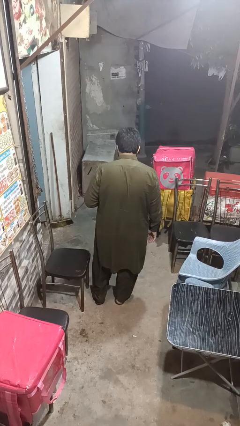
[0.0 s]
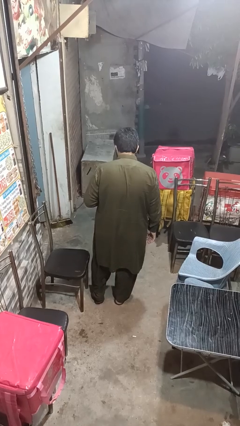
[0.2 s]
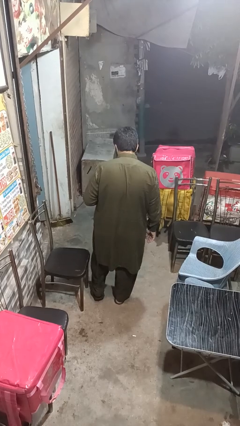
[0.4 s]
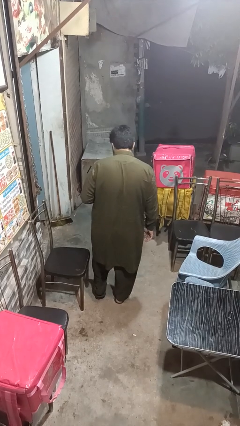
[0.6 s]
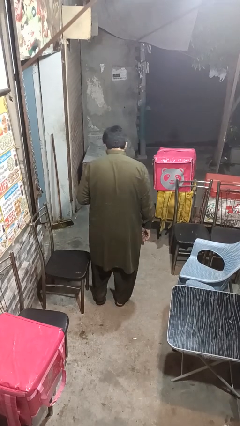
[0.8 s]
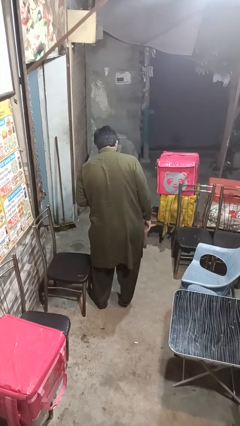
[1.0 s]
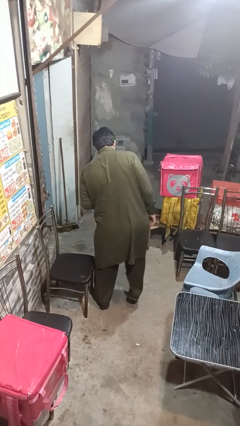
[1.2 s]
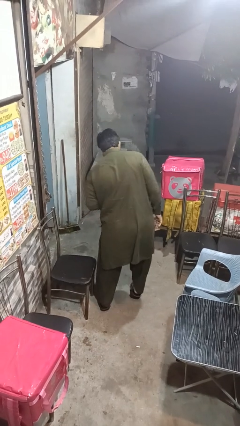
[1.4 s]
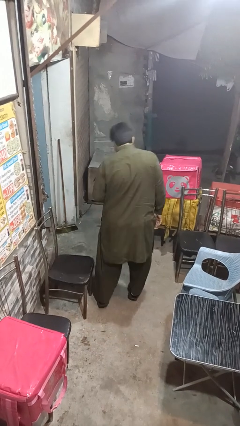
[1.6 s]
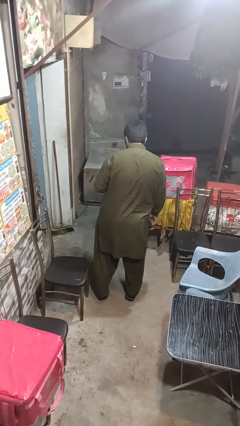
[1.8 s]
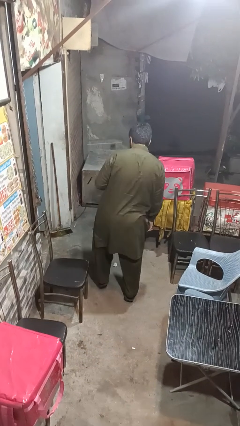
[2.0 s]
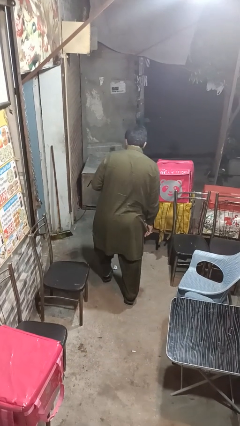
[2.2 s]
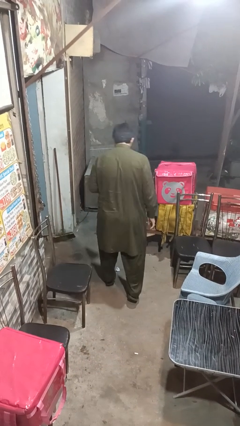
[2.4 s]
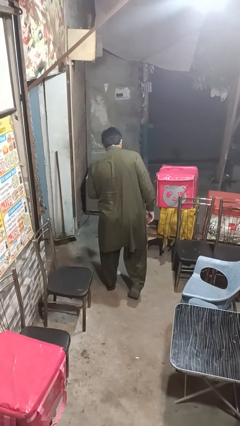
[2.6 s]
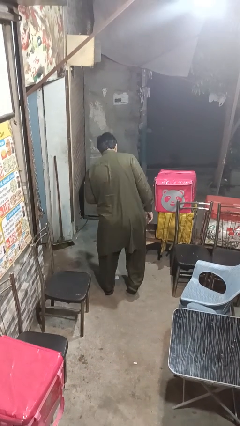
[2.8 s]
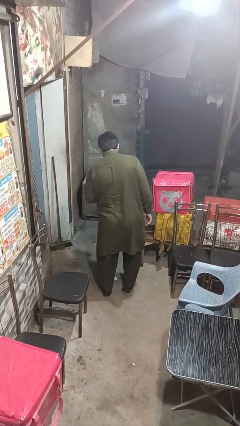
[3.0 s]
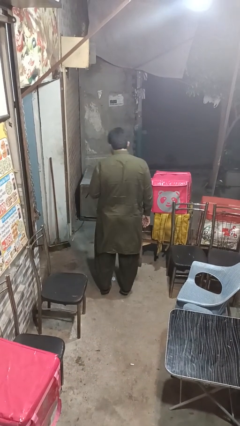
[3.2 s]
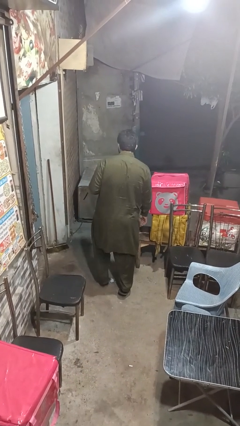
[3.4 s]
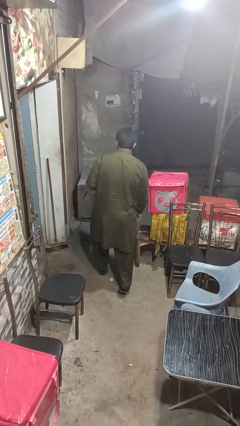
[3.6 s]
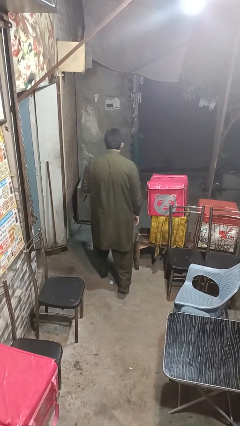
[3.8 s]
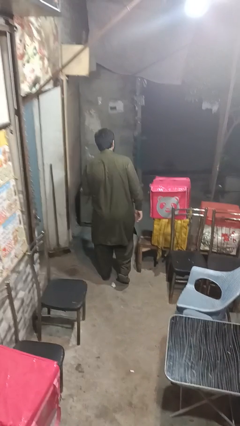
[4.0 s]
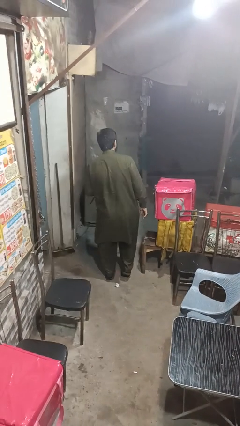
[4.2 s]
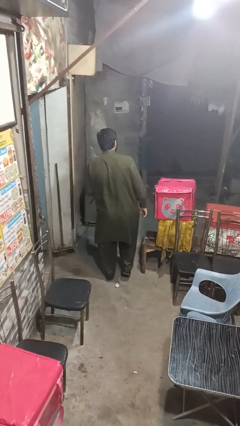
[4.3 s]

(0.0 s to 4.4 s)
person walks tiptoe

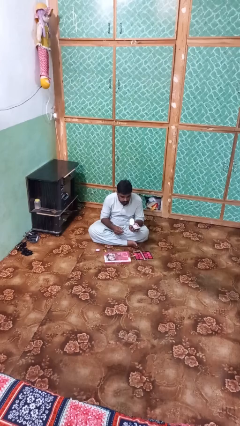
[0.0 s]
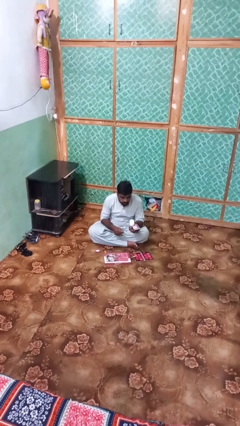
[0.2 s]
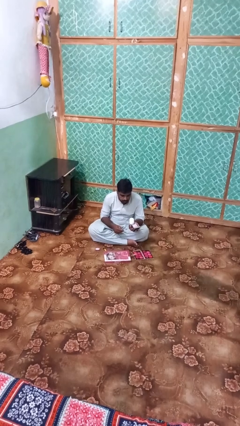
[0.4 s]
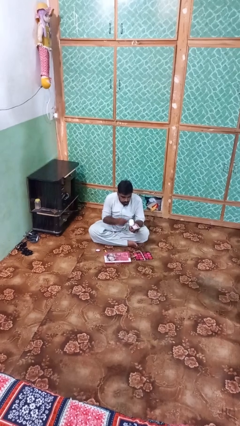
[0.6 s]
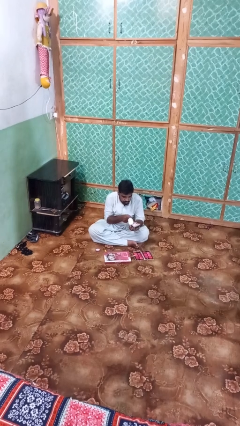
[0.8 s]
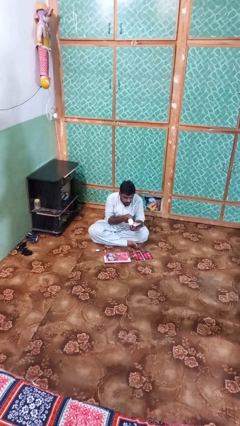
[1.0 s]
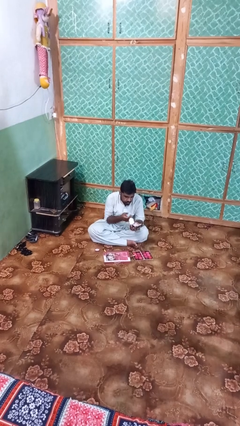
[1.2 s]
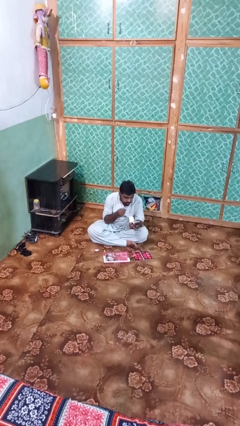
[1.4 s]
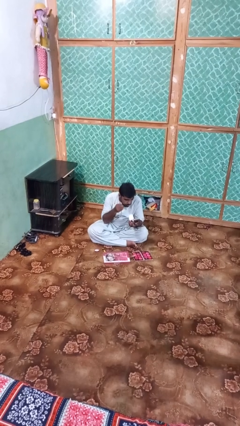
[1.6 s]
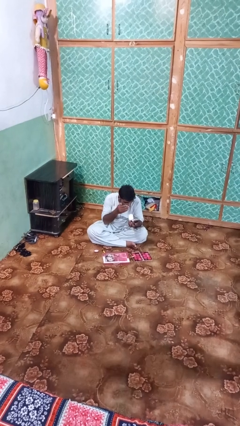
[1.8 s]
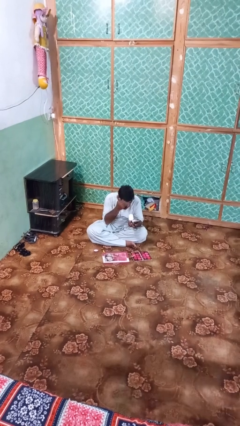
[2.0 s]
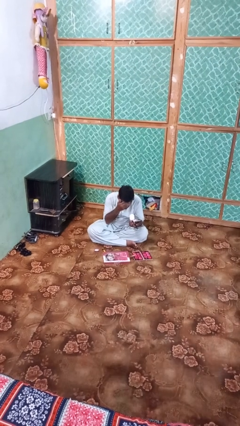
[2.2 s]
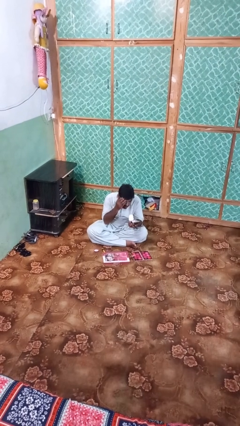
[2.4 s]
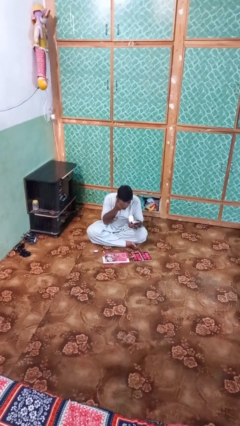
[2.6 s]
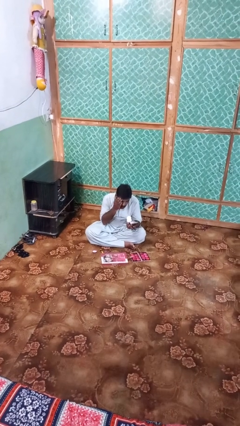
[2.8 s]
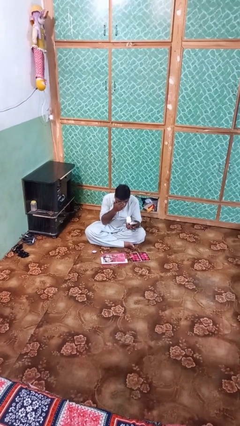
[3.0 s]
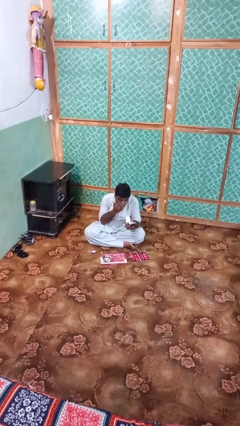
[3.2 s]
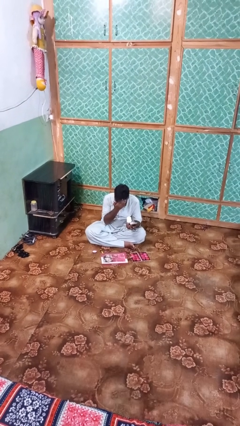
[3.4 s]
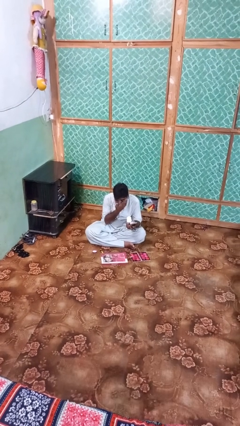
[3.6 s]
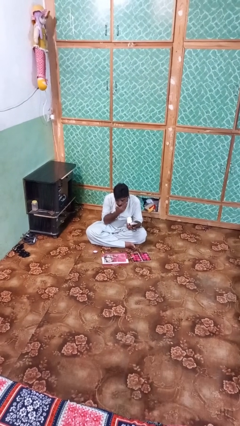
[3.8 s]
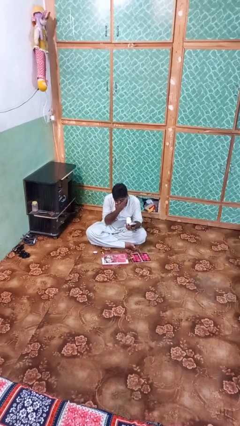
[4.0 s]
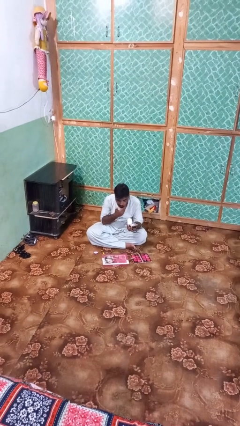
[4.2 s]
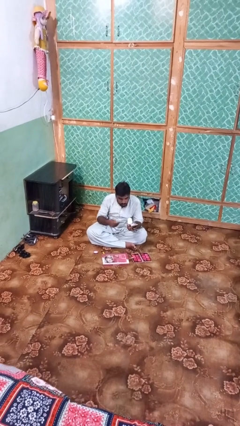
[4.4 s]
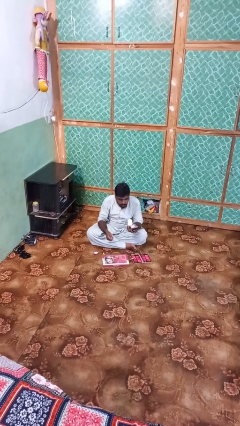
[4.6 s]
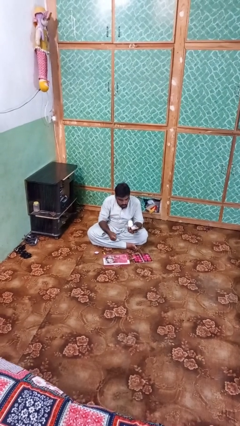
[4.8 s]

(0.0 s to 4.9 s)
person applies foundation makeup

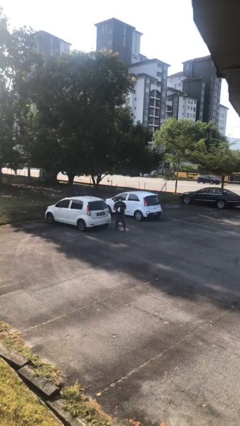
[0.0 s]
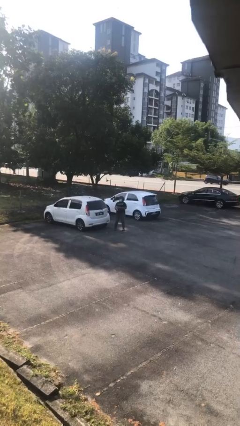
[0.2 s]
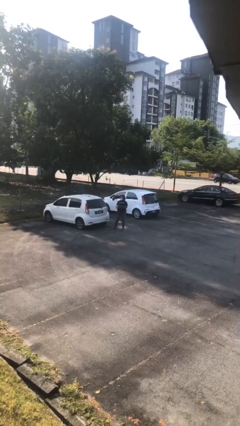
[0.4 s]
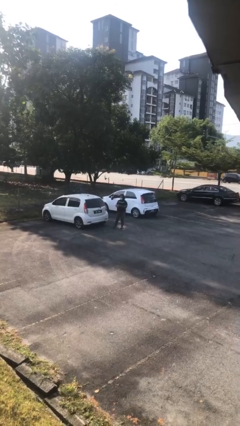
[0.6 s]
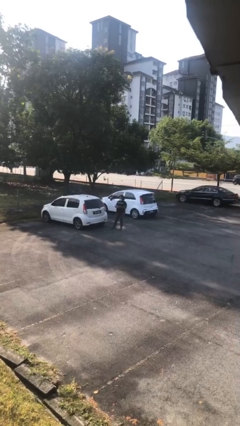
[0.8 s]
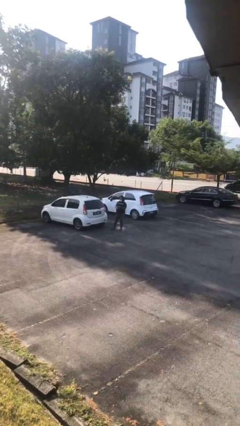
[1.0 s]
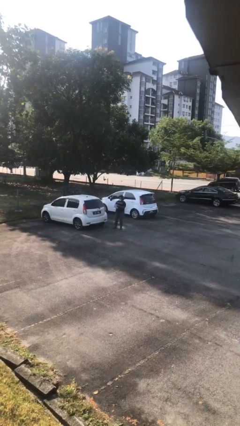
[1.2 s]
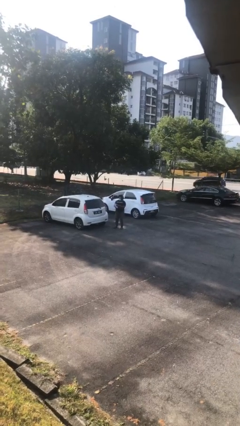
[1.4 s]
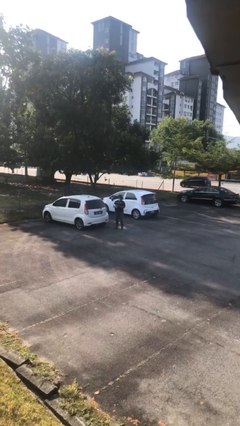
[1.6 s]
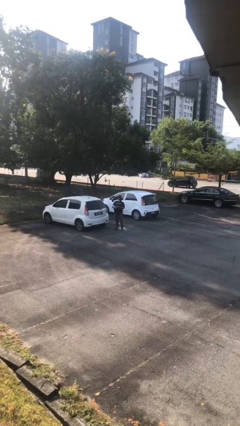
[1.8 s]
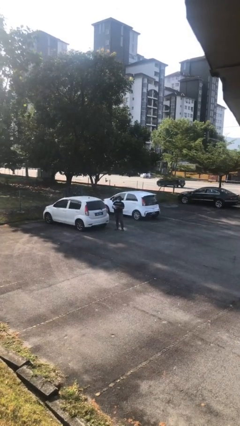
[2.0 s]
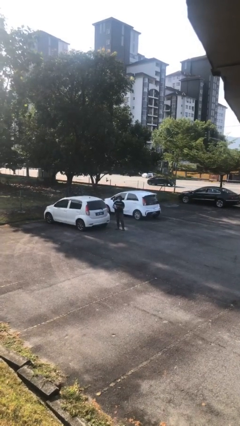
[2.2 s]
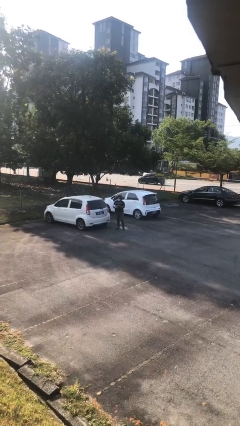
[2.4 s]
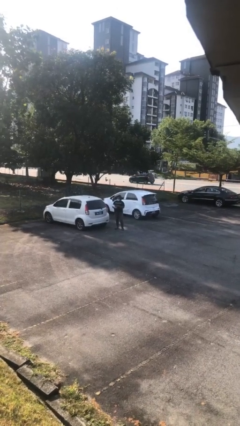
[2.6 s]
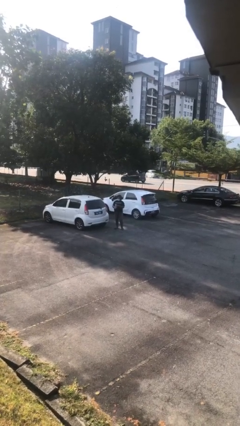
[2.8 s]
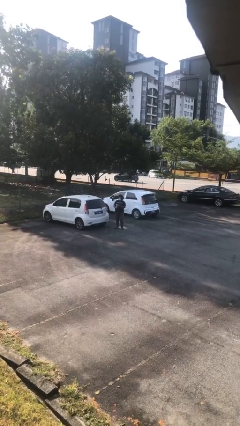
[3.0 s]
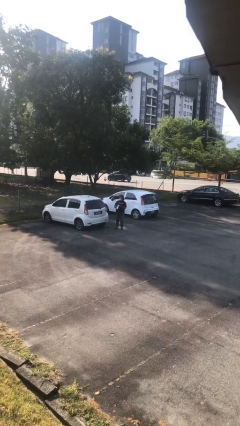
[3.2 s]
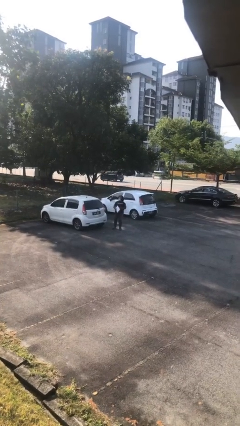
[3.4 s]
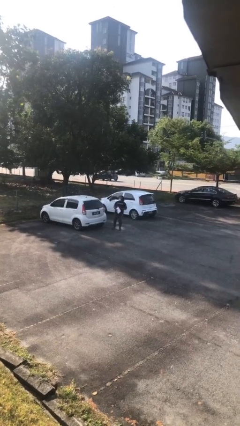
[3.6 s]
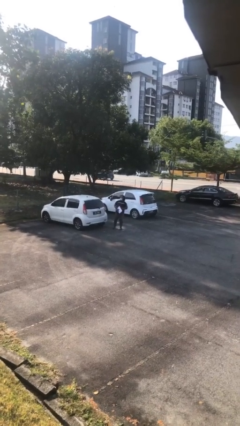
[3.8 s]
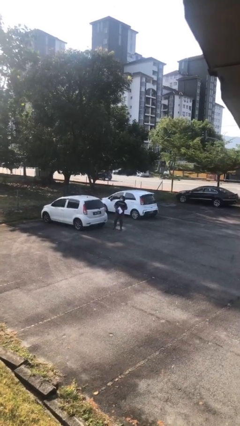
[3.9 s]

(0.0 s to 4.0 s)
person reads document

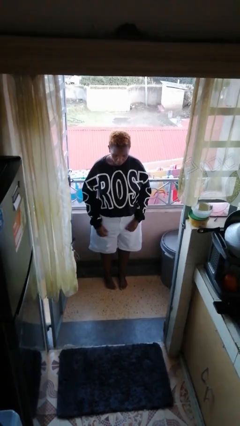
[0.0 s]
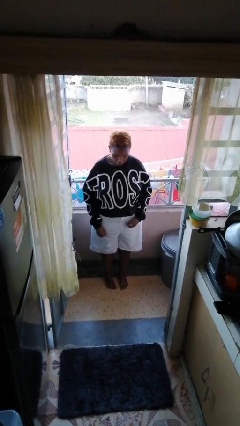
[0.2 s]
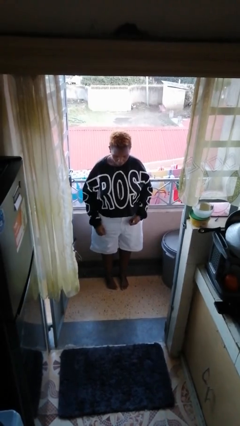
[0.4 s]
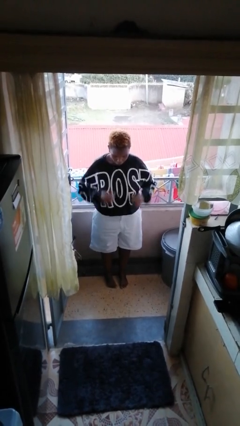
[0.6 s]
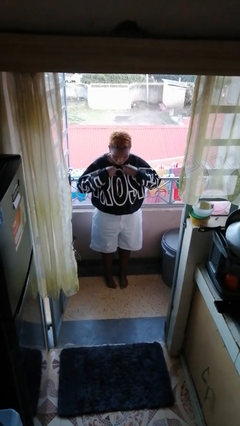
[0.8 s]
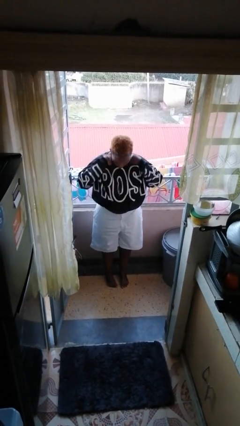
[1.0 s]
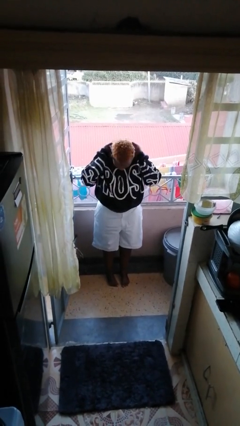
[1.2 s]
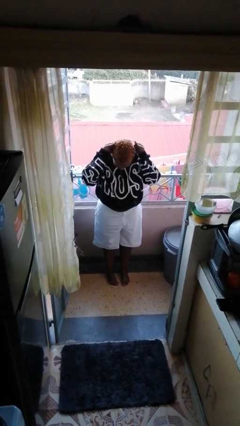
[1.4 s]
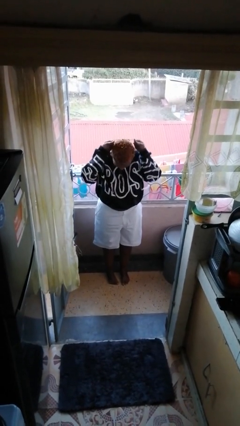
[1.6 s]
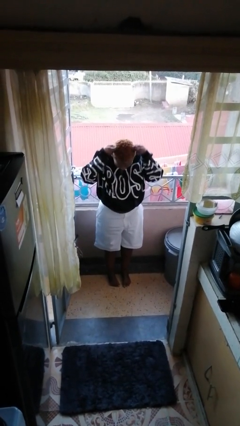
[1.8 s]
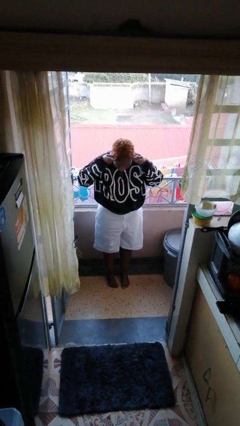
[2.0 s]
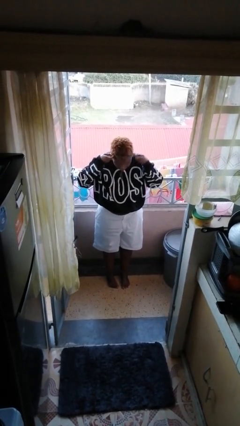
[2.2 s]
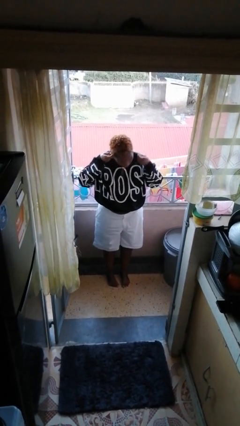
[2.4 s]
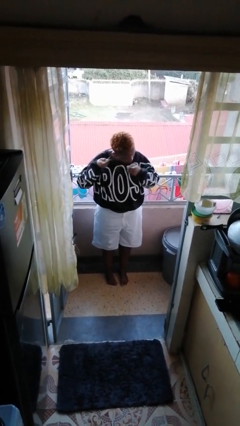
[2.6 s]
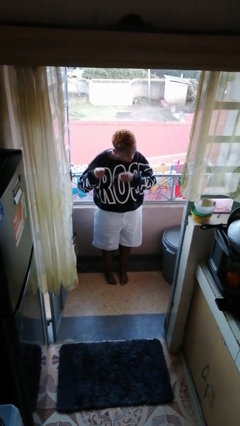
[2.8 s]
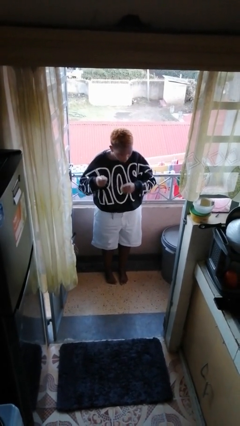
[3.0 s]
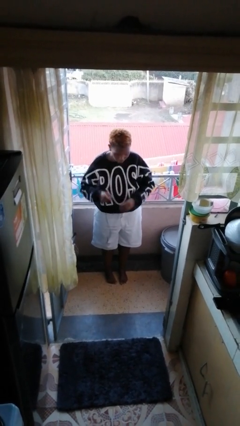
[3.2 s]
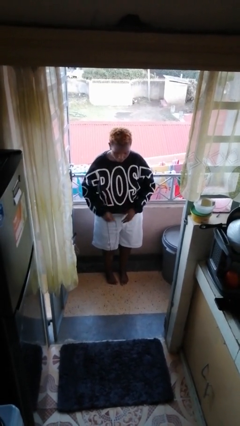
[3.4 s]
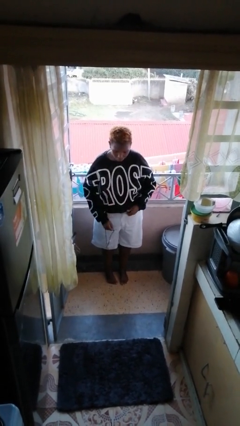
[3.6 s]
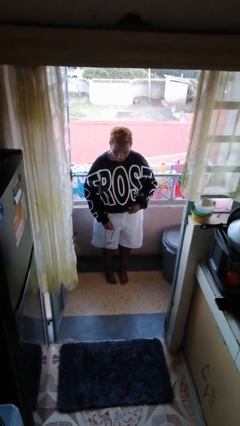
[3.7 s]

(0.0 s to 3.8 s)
person takes off necklace

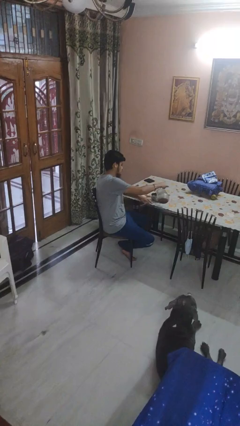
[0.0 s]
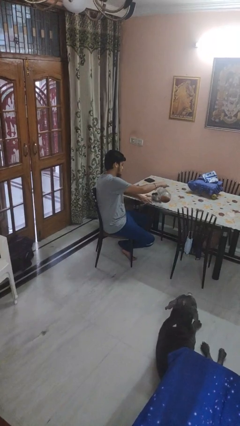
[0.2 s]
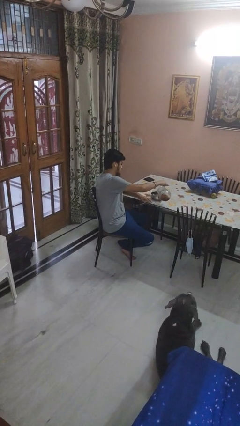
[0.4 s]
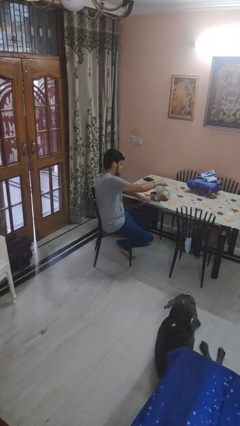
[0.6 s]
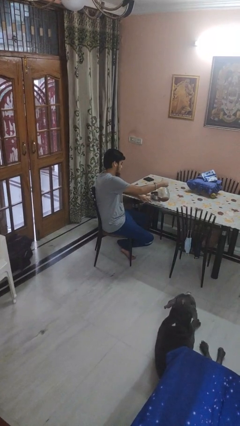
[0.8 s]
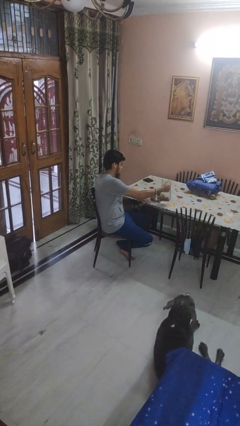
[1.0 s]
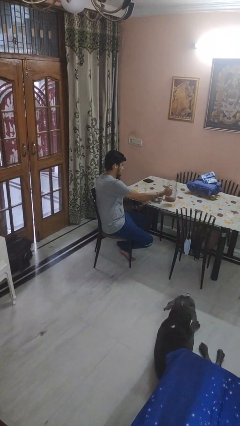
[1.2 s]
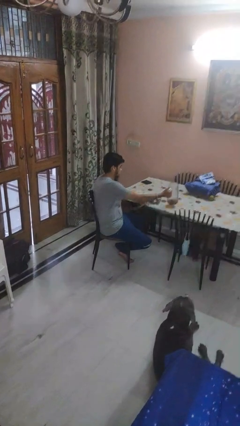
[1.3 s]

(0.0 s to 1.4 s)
person pours into bowl
